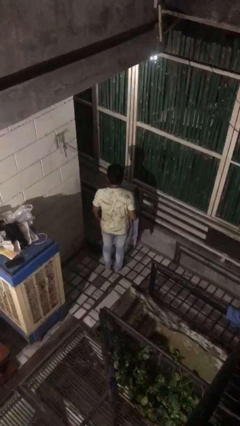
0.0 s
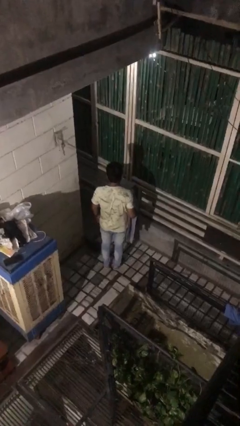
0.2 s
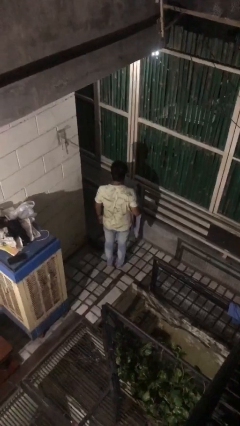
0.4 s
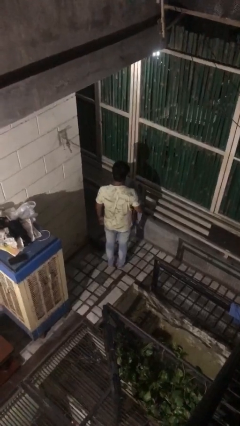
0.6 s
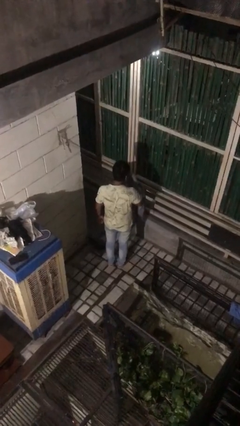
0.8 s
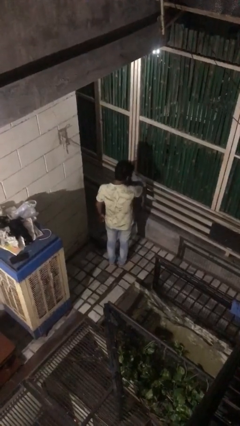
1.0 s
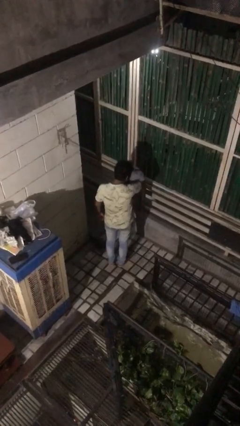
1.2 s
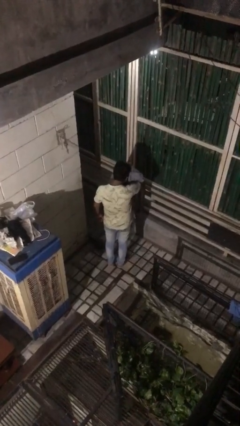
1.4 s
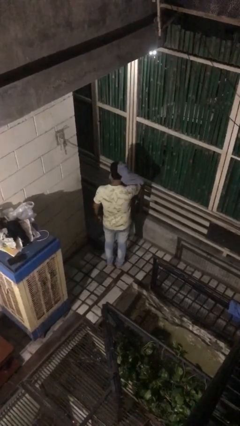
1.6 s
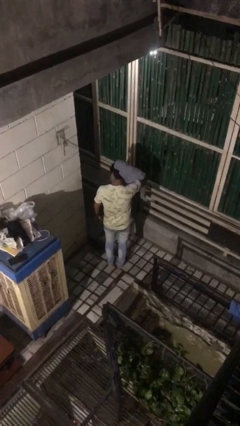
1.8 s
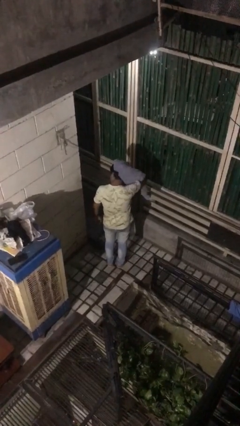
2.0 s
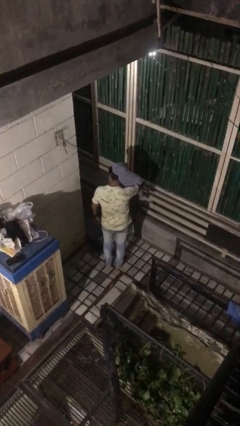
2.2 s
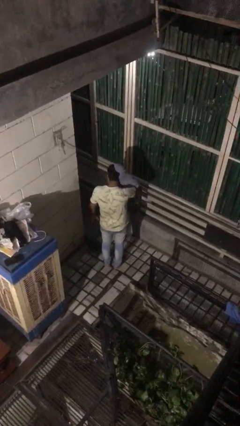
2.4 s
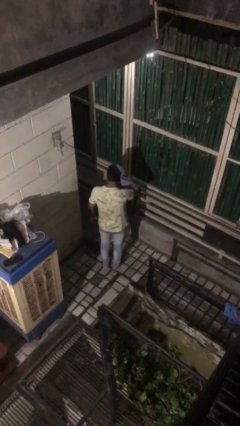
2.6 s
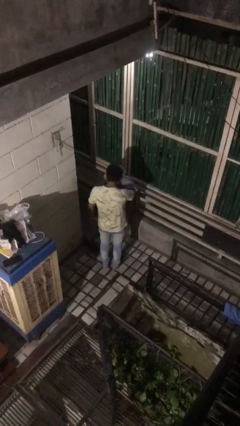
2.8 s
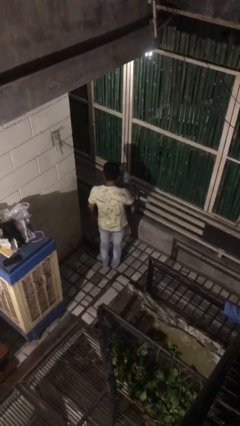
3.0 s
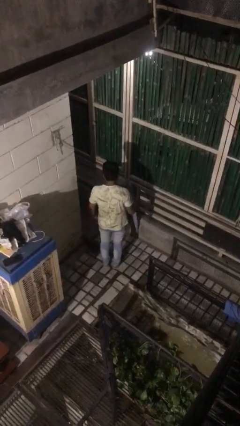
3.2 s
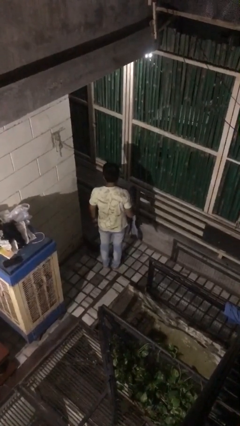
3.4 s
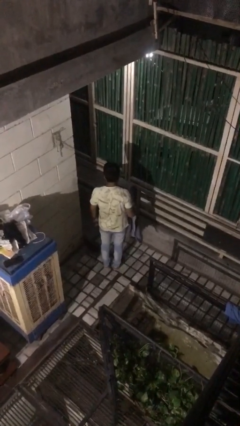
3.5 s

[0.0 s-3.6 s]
person dries hair with towel

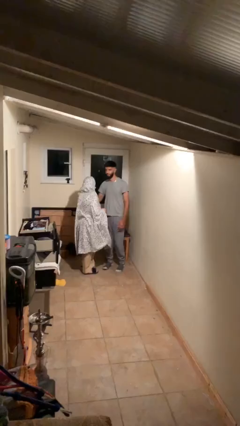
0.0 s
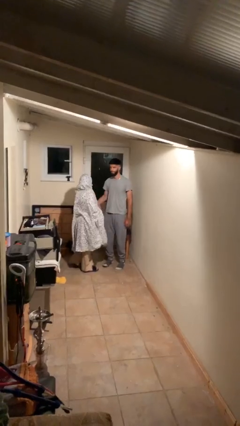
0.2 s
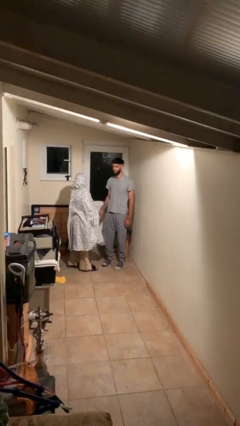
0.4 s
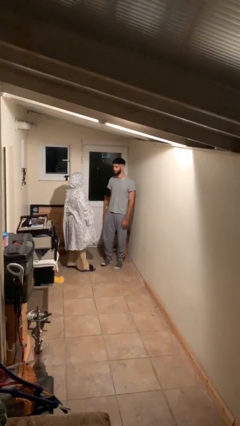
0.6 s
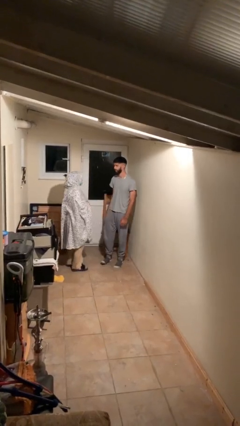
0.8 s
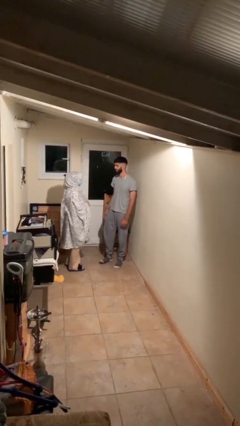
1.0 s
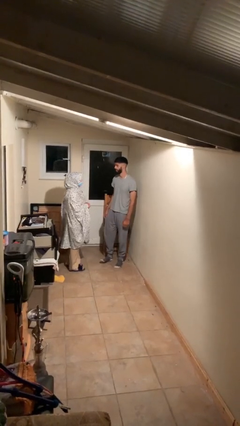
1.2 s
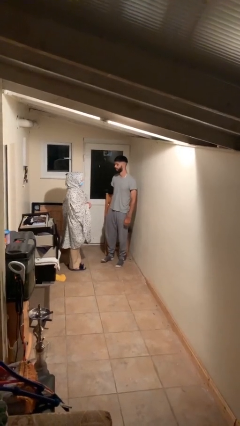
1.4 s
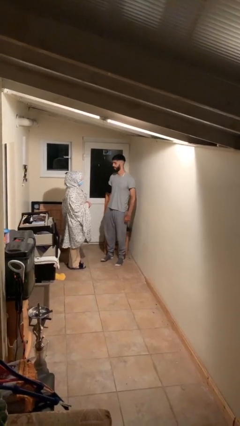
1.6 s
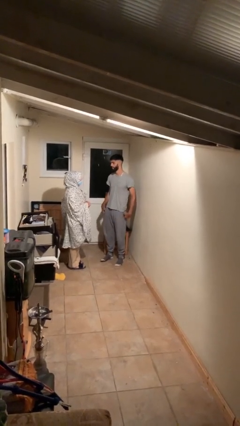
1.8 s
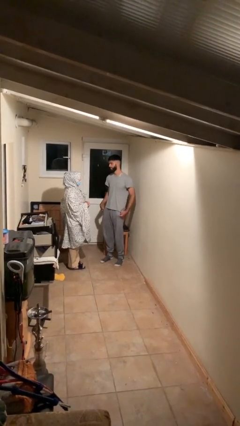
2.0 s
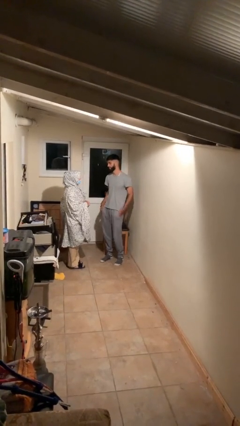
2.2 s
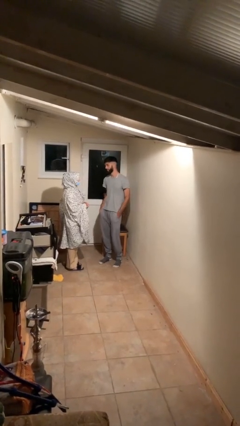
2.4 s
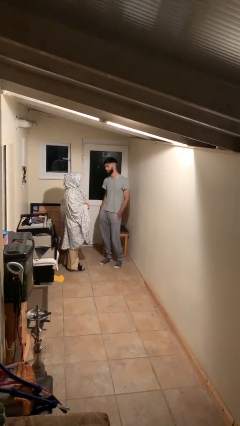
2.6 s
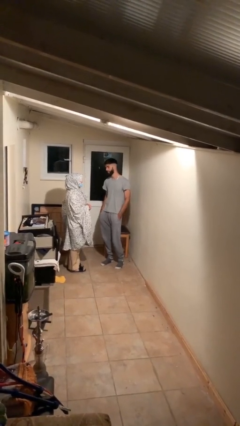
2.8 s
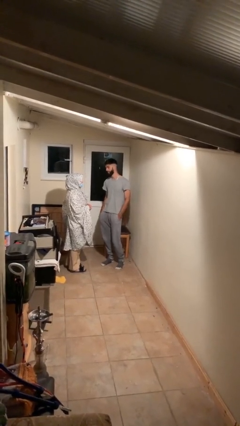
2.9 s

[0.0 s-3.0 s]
person talks to person

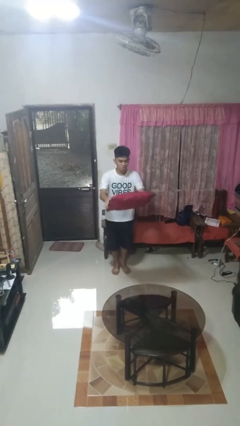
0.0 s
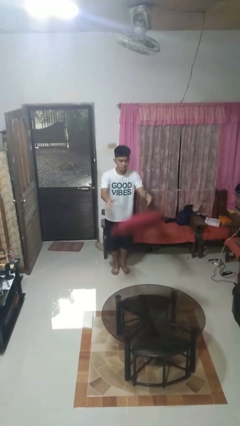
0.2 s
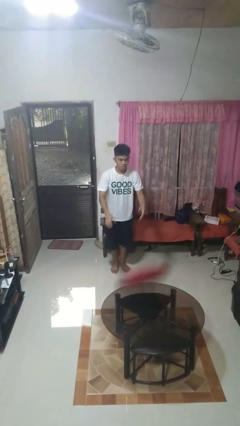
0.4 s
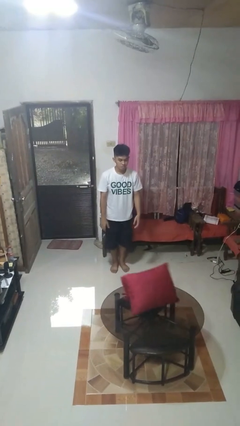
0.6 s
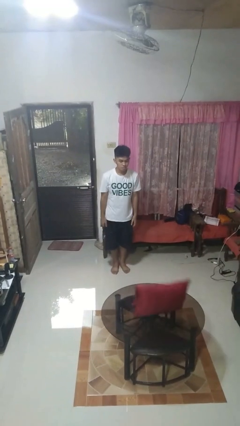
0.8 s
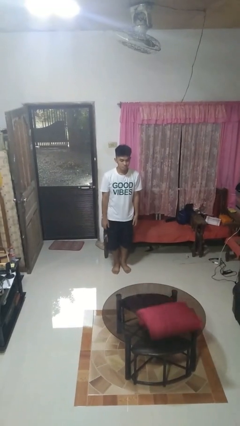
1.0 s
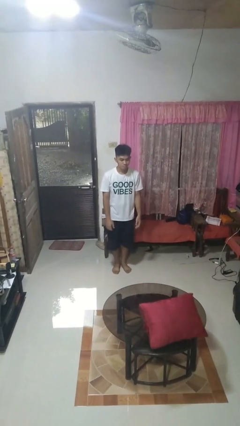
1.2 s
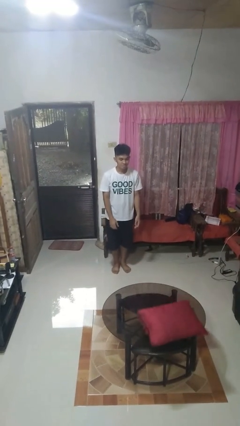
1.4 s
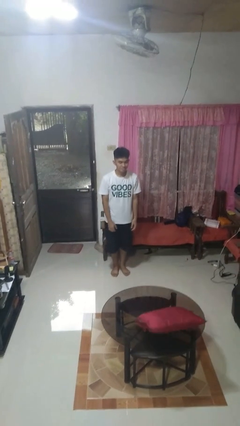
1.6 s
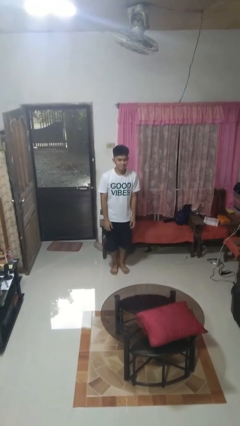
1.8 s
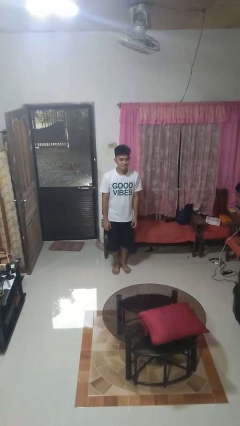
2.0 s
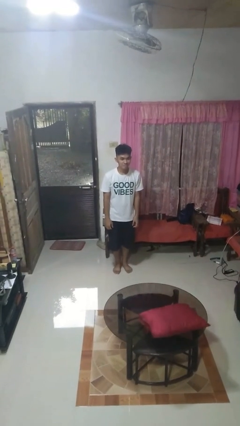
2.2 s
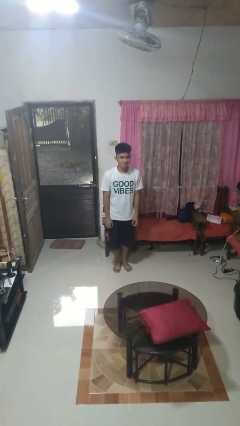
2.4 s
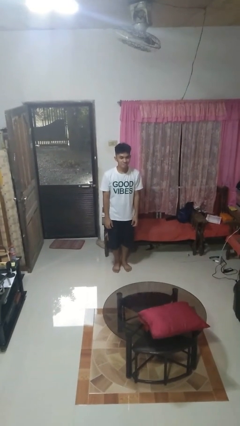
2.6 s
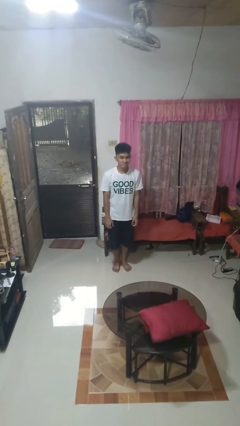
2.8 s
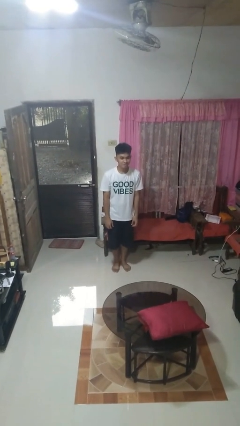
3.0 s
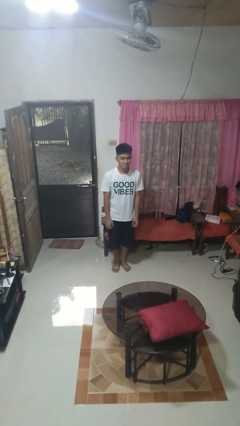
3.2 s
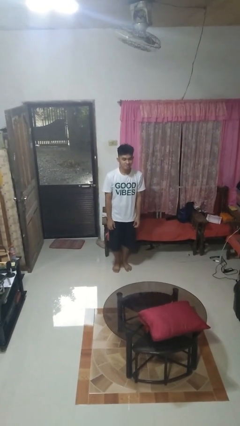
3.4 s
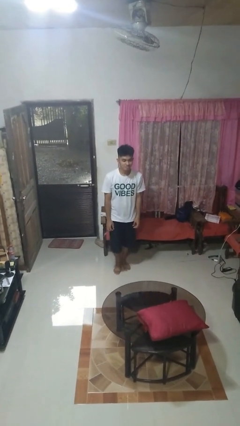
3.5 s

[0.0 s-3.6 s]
person throws object on table

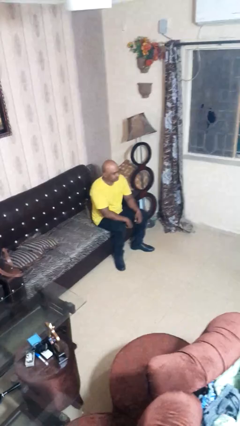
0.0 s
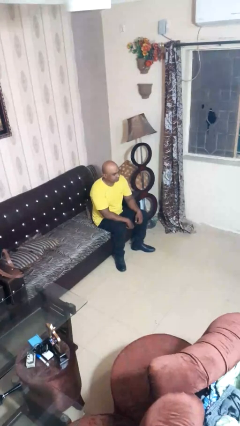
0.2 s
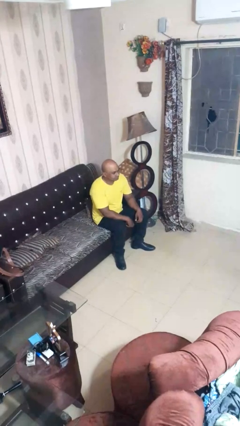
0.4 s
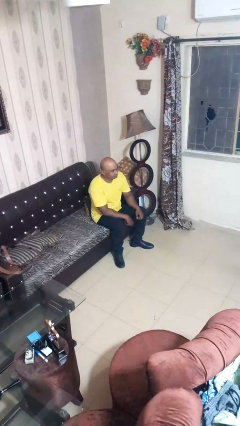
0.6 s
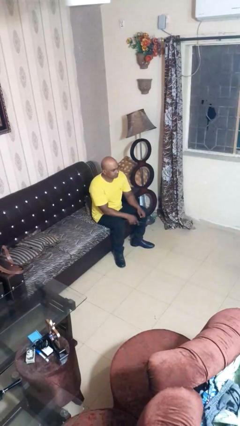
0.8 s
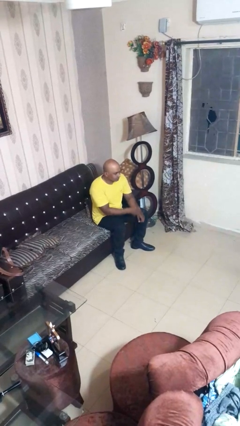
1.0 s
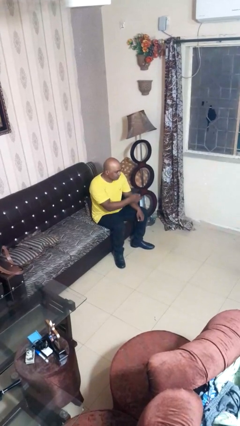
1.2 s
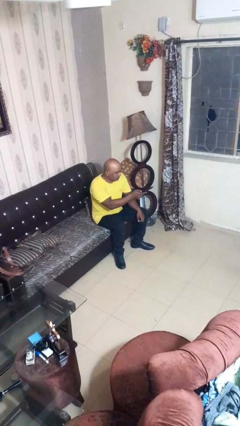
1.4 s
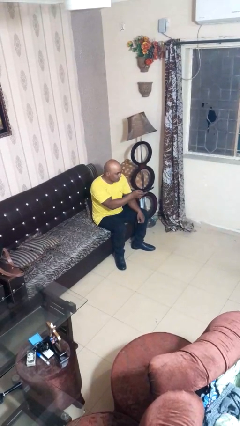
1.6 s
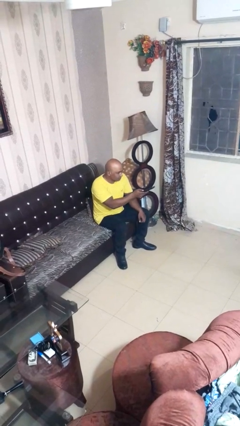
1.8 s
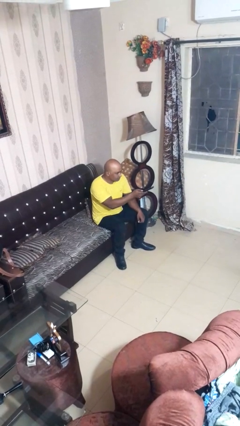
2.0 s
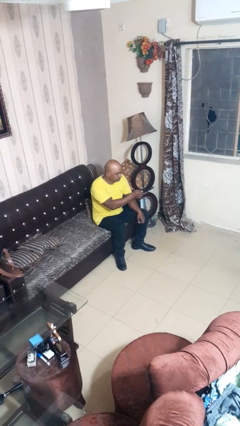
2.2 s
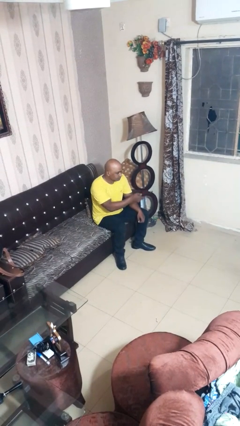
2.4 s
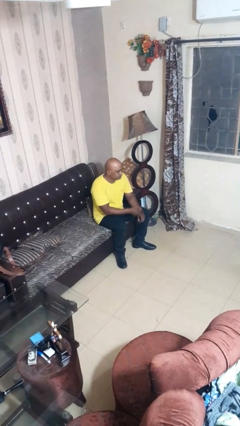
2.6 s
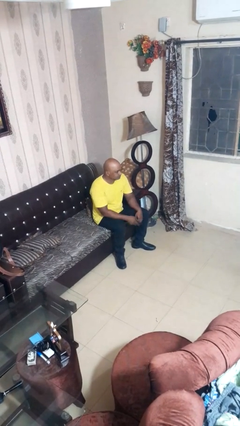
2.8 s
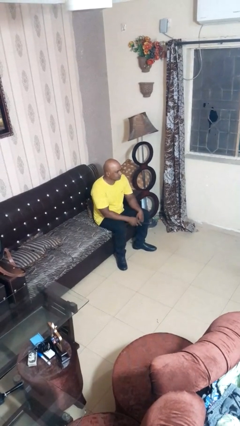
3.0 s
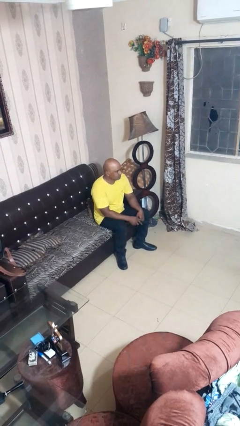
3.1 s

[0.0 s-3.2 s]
person uses television remote

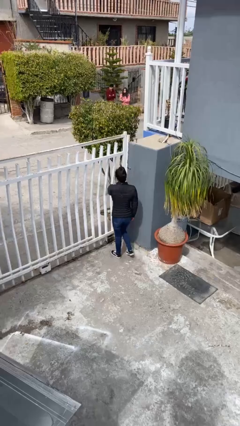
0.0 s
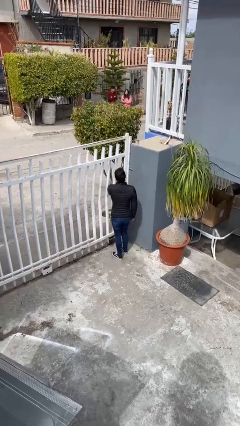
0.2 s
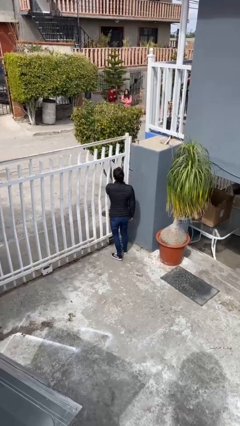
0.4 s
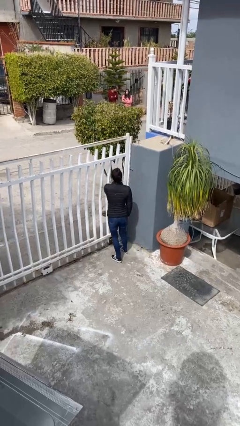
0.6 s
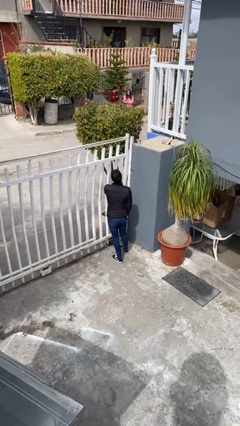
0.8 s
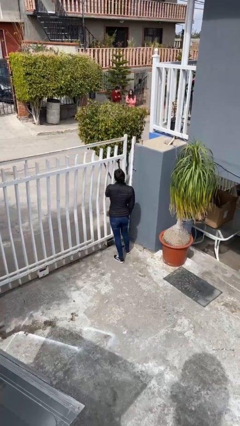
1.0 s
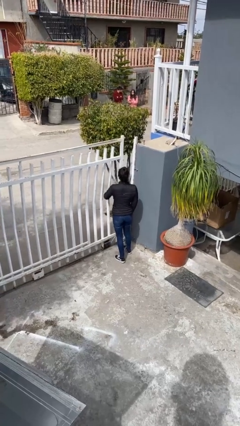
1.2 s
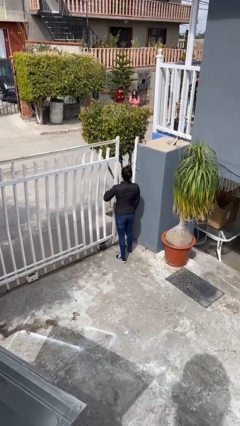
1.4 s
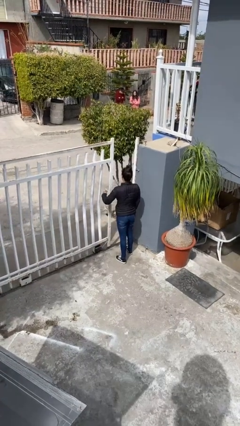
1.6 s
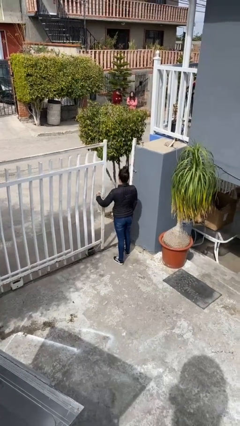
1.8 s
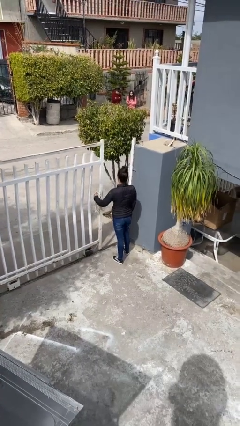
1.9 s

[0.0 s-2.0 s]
person opens facility door

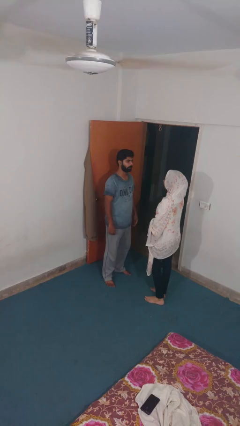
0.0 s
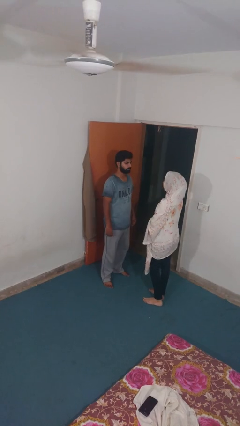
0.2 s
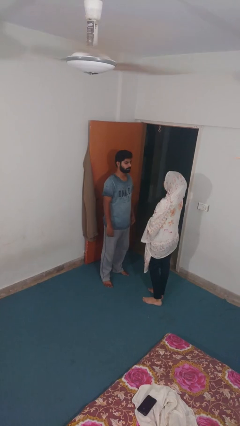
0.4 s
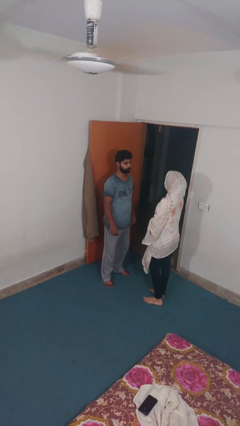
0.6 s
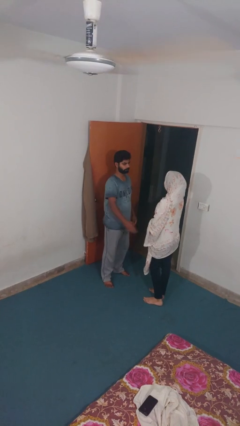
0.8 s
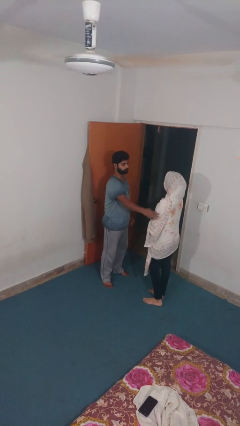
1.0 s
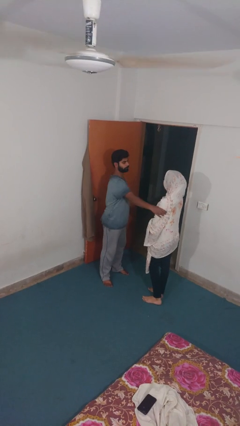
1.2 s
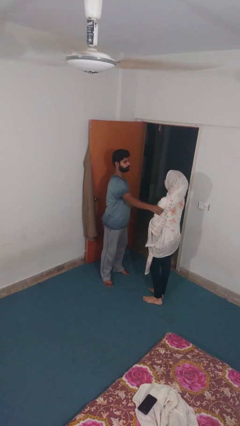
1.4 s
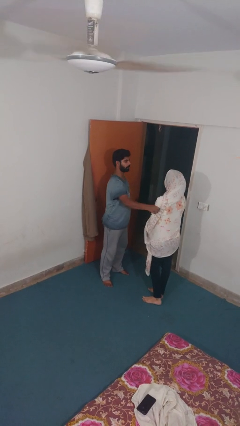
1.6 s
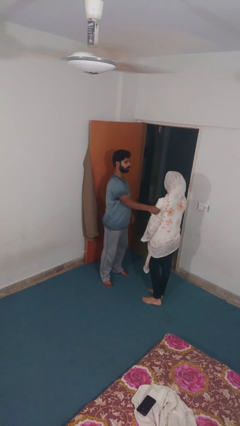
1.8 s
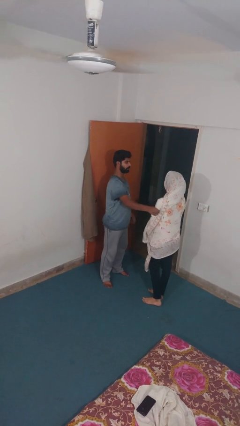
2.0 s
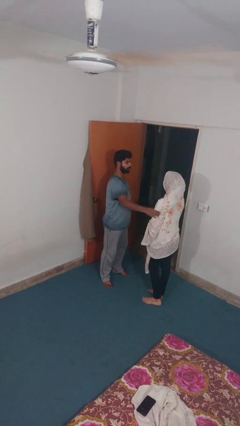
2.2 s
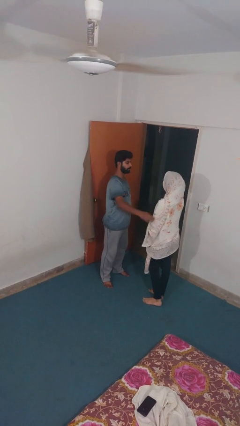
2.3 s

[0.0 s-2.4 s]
person grabs person by bicep
